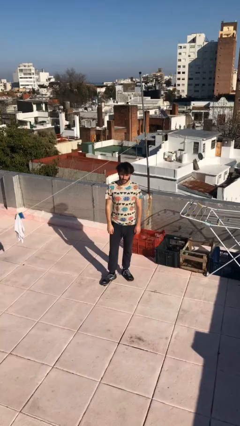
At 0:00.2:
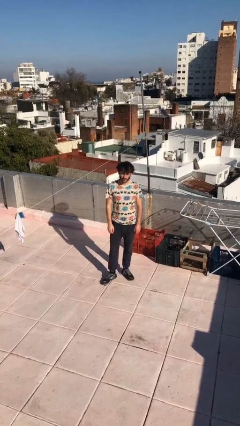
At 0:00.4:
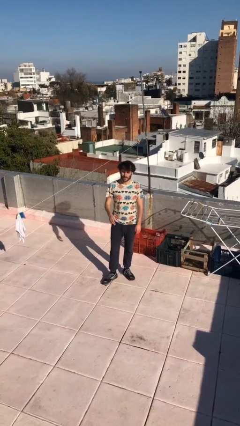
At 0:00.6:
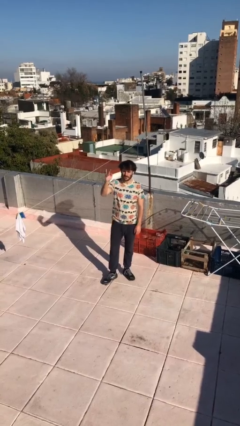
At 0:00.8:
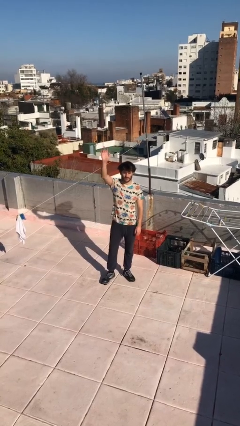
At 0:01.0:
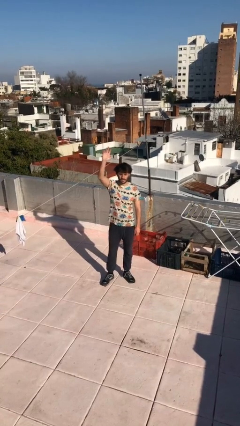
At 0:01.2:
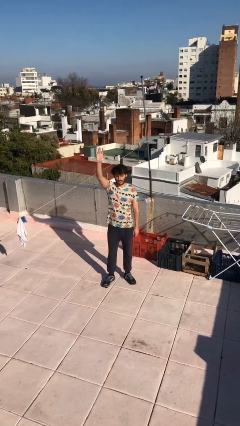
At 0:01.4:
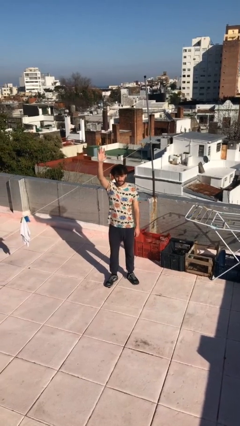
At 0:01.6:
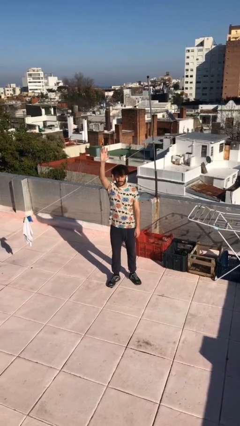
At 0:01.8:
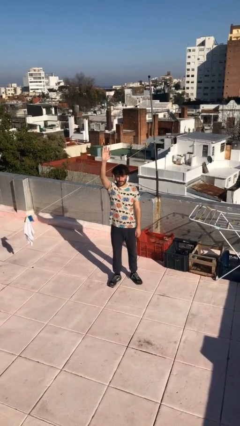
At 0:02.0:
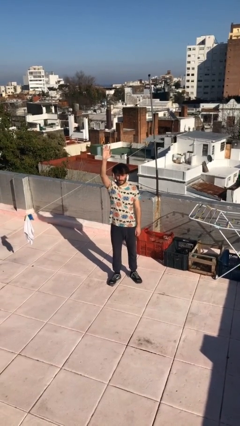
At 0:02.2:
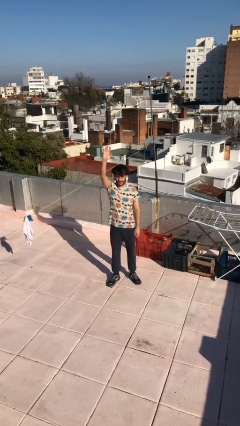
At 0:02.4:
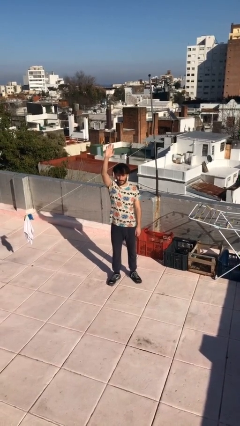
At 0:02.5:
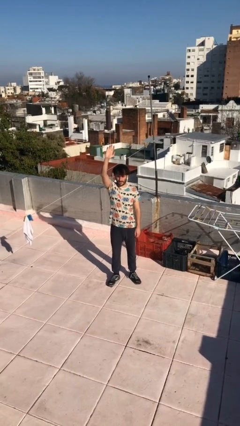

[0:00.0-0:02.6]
person gestures raise hand

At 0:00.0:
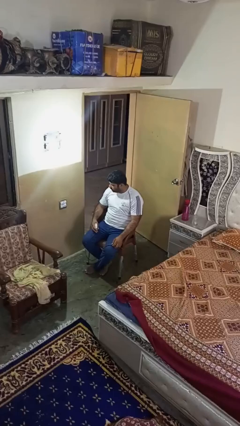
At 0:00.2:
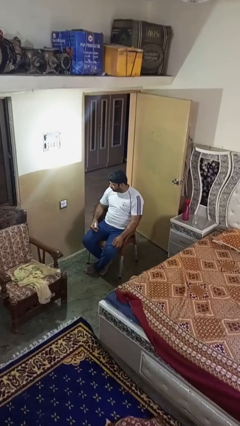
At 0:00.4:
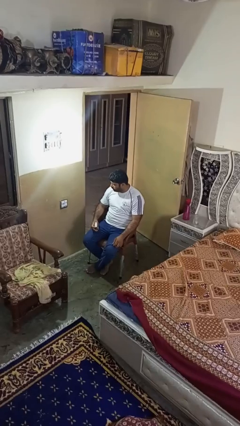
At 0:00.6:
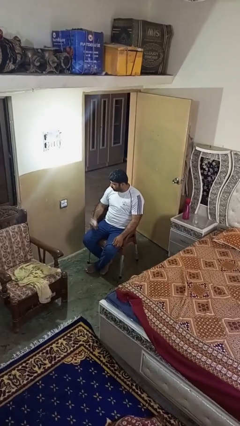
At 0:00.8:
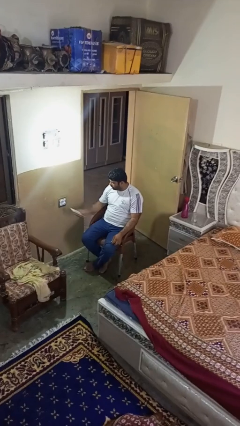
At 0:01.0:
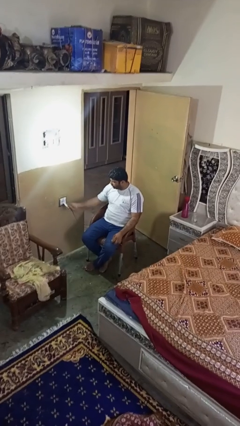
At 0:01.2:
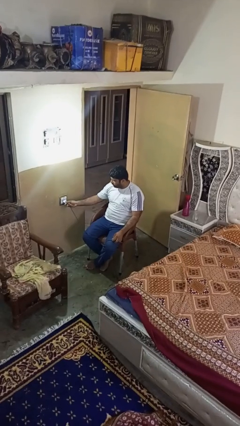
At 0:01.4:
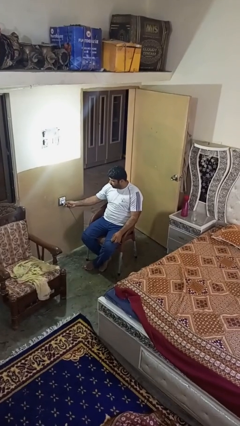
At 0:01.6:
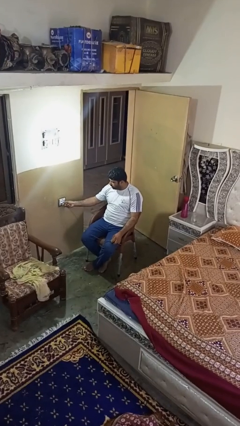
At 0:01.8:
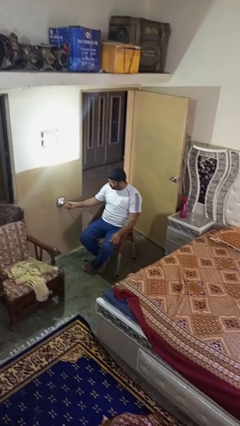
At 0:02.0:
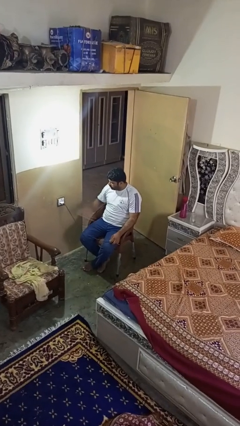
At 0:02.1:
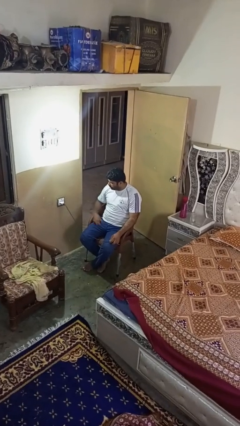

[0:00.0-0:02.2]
person plugs into electrical socket

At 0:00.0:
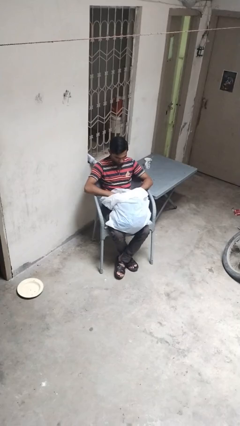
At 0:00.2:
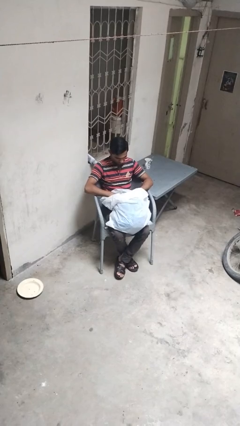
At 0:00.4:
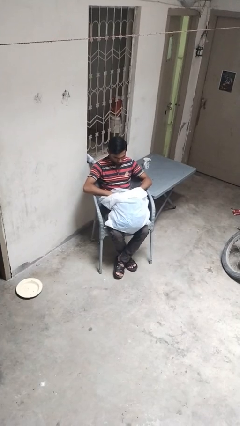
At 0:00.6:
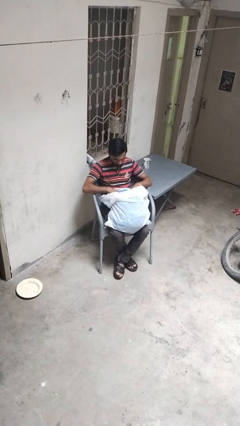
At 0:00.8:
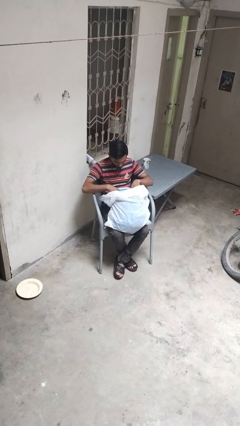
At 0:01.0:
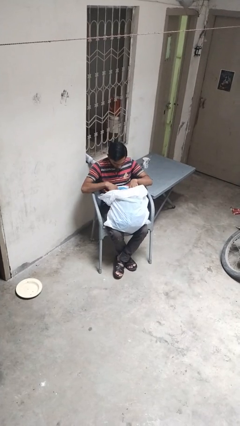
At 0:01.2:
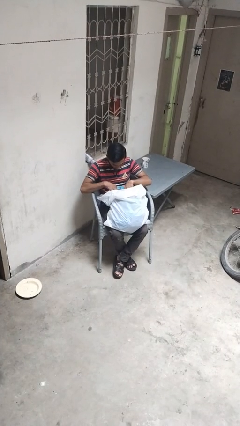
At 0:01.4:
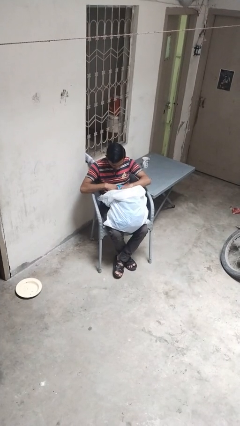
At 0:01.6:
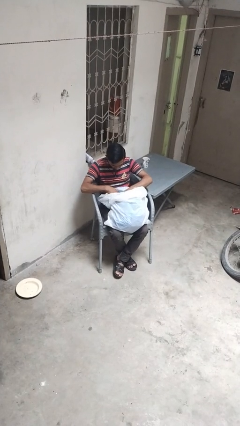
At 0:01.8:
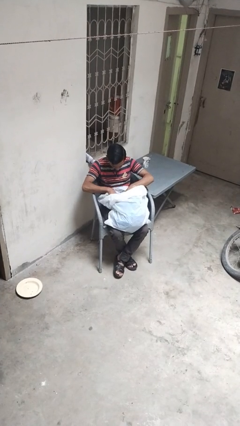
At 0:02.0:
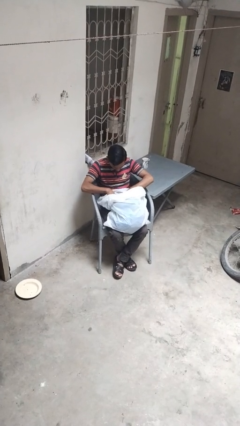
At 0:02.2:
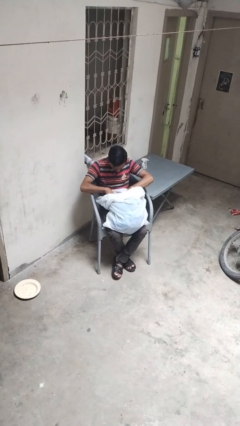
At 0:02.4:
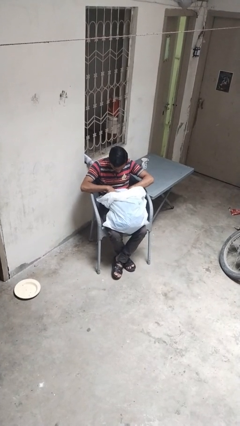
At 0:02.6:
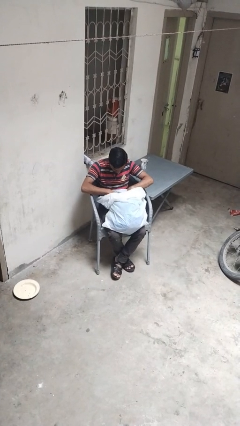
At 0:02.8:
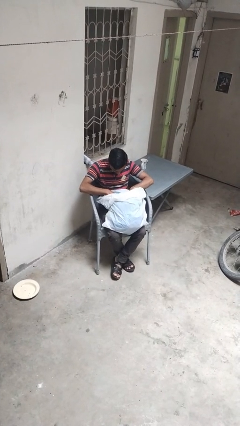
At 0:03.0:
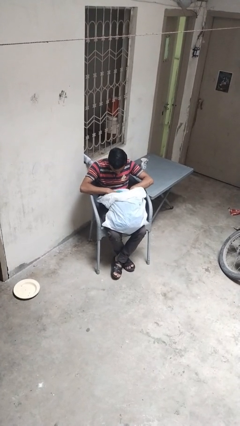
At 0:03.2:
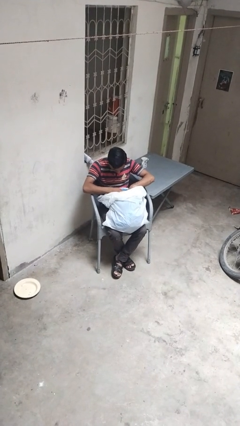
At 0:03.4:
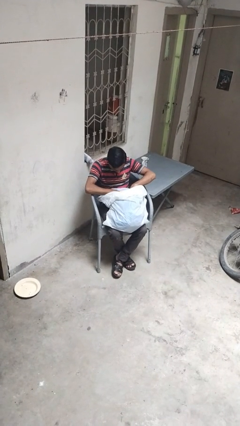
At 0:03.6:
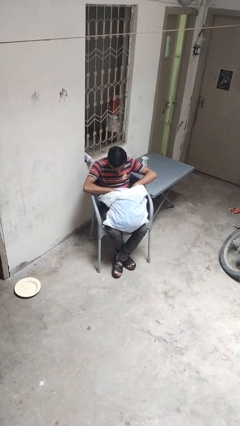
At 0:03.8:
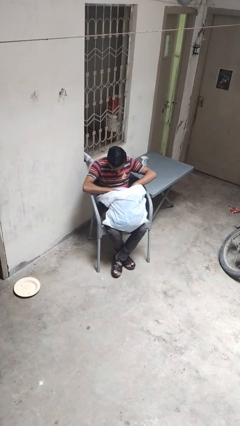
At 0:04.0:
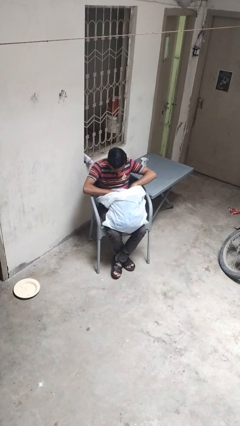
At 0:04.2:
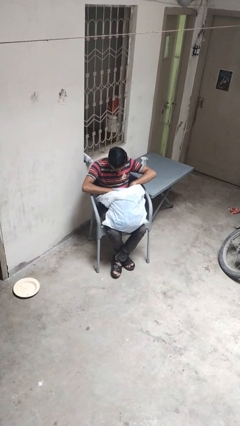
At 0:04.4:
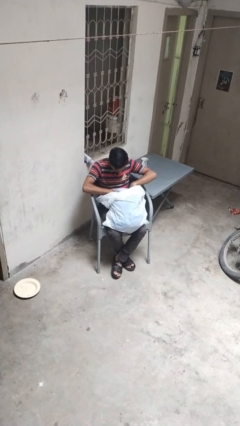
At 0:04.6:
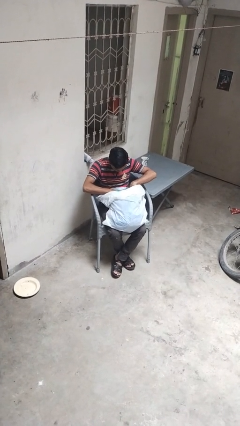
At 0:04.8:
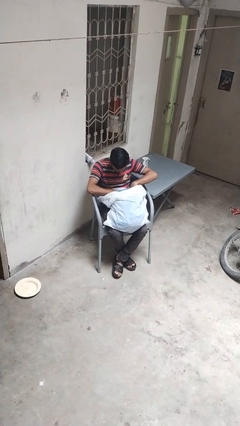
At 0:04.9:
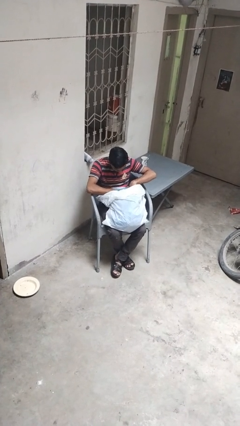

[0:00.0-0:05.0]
person searches in bag

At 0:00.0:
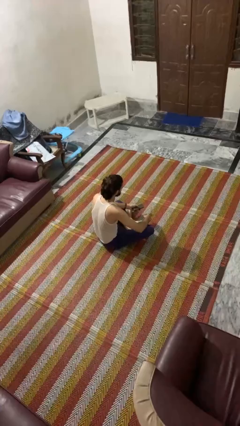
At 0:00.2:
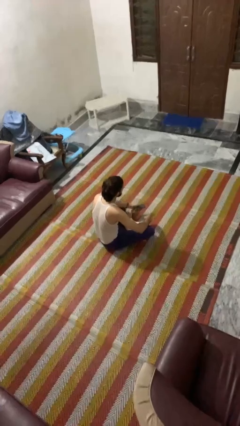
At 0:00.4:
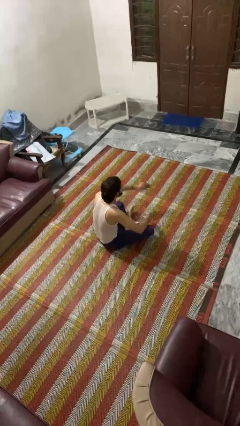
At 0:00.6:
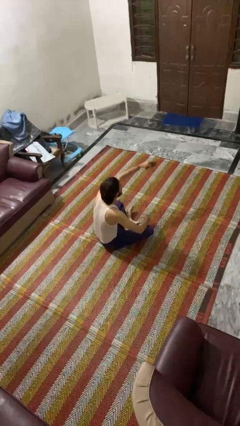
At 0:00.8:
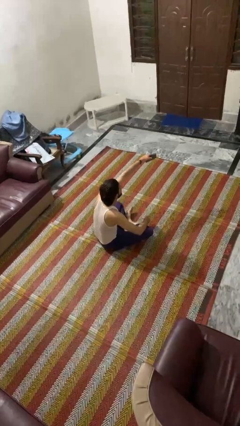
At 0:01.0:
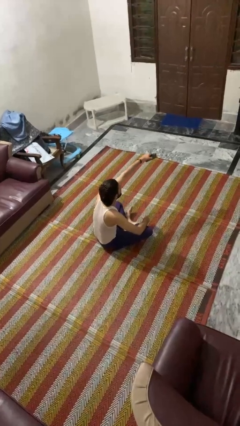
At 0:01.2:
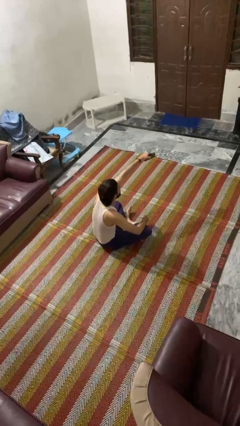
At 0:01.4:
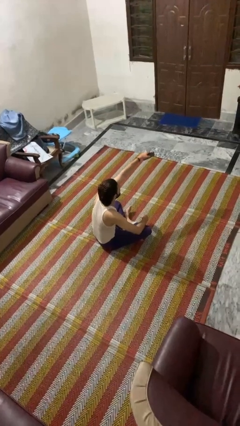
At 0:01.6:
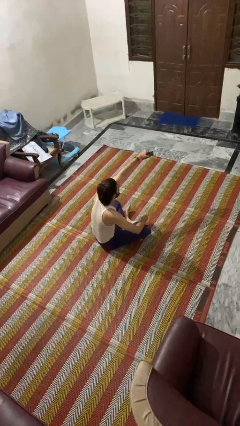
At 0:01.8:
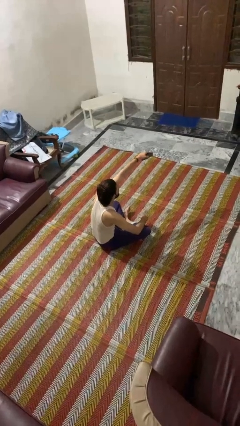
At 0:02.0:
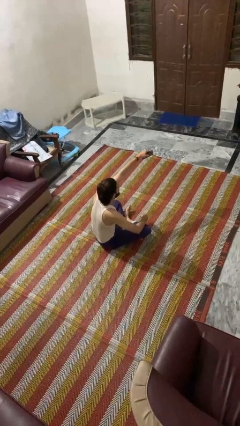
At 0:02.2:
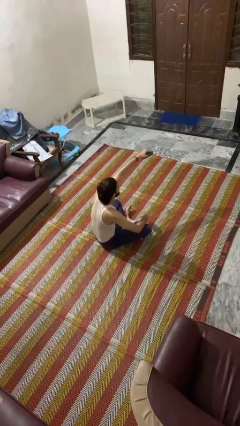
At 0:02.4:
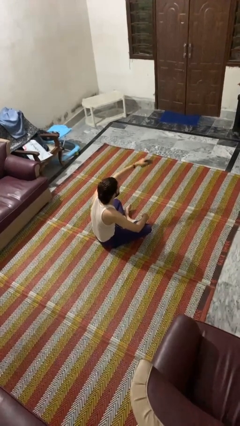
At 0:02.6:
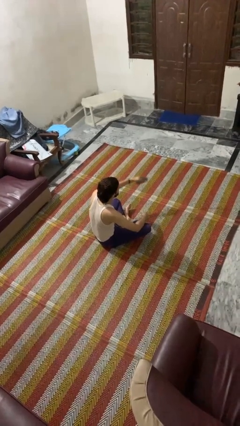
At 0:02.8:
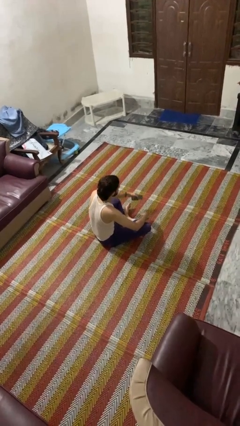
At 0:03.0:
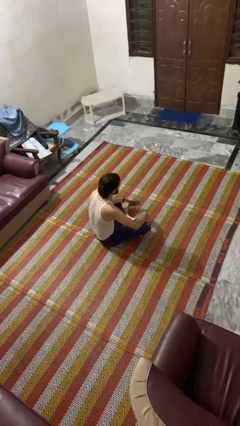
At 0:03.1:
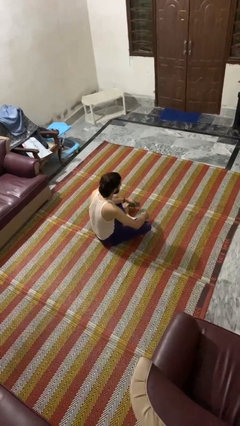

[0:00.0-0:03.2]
person uses television remote

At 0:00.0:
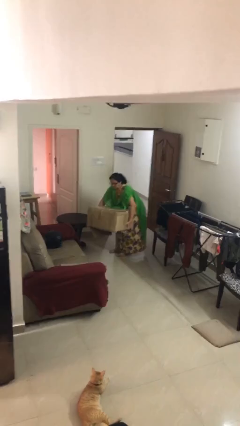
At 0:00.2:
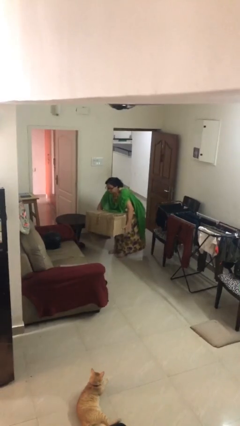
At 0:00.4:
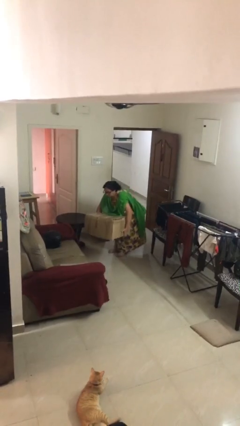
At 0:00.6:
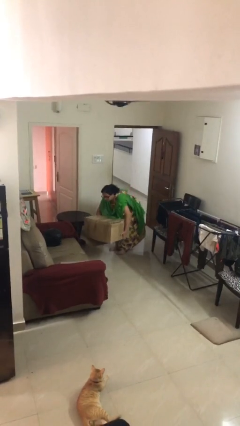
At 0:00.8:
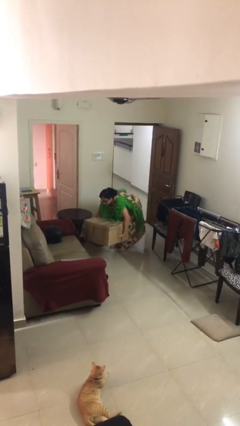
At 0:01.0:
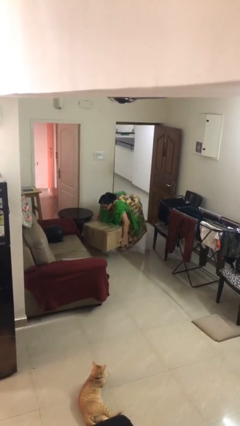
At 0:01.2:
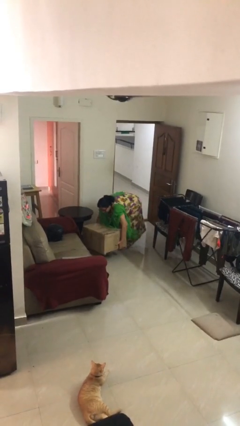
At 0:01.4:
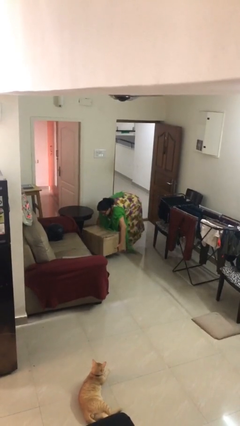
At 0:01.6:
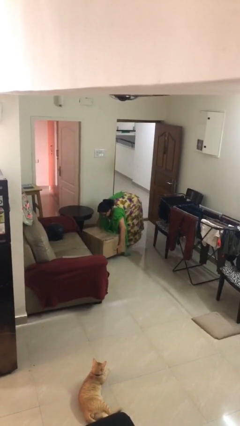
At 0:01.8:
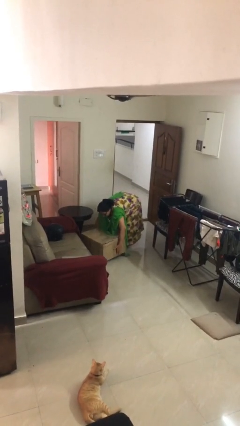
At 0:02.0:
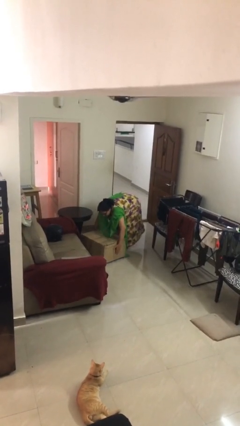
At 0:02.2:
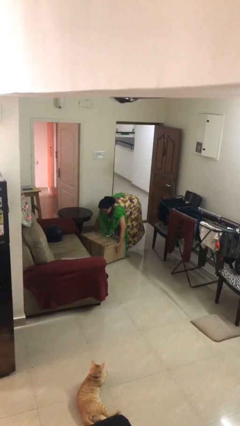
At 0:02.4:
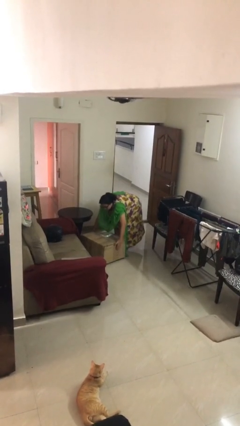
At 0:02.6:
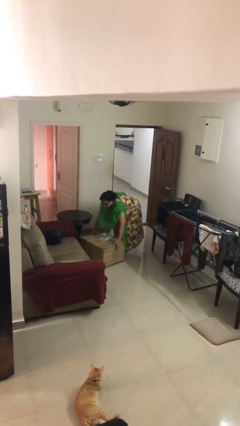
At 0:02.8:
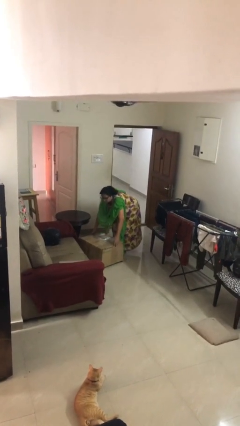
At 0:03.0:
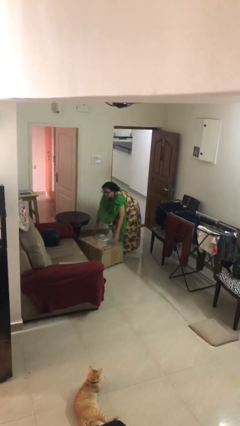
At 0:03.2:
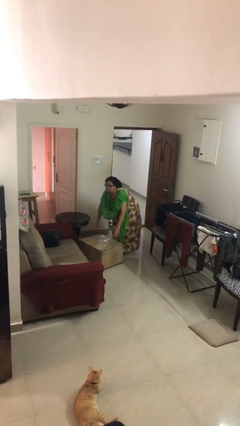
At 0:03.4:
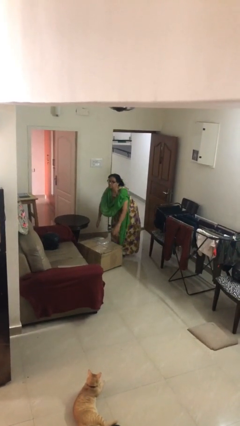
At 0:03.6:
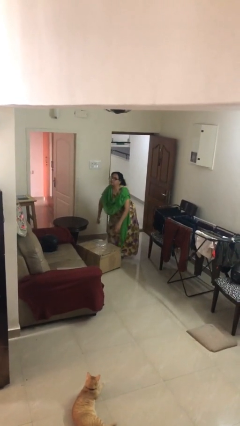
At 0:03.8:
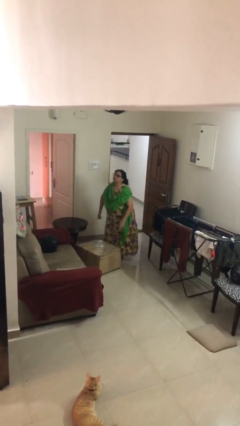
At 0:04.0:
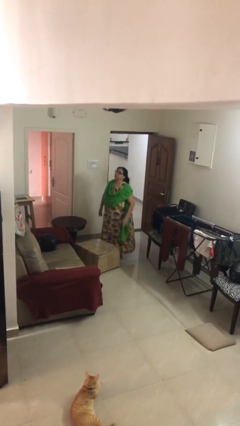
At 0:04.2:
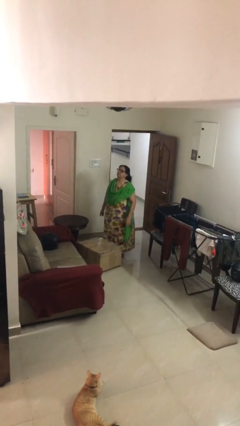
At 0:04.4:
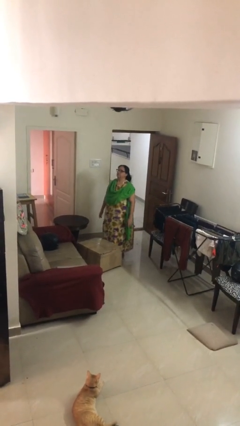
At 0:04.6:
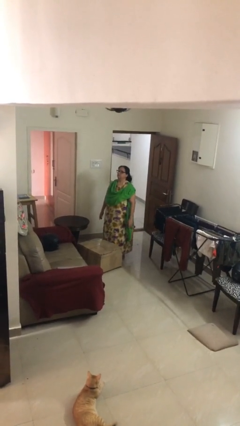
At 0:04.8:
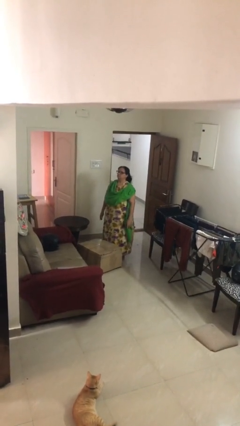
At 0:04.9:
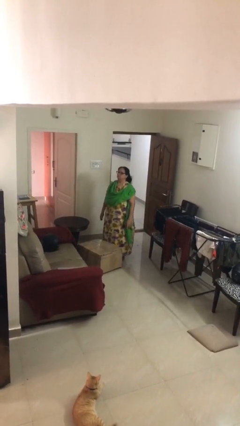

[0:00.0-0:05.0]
person puts down object on floor
